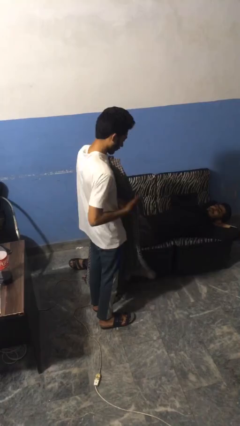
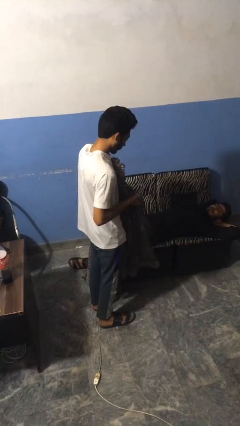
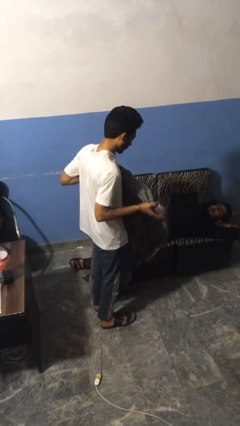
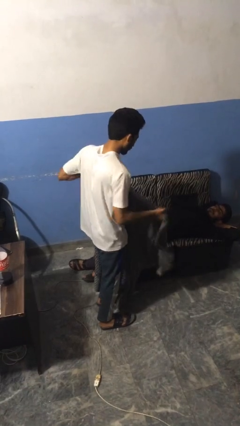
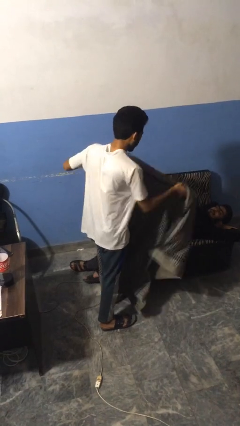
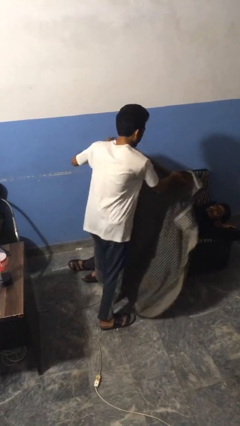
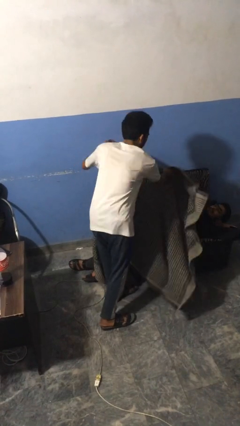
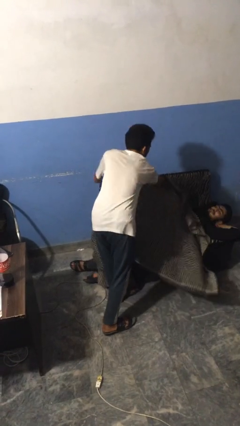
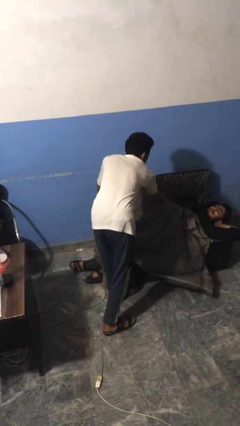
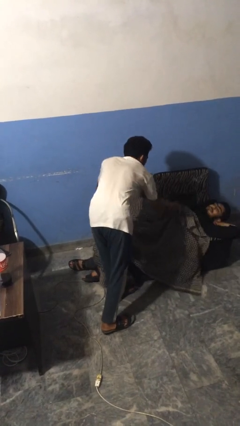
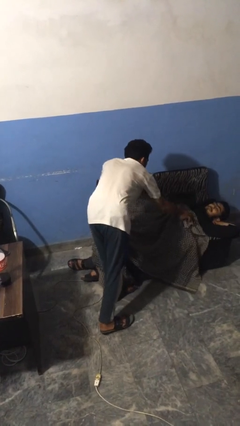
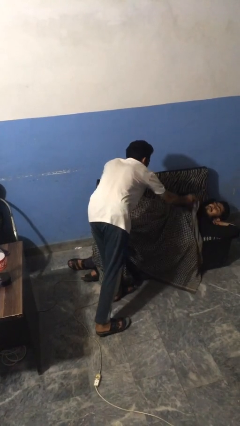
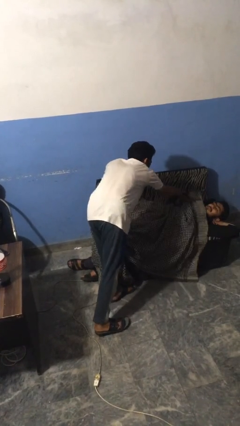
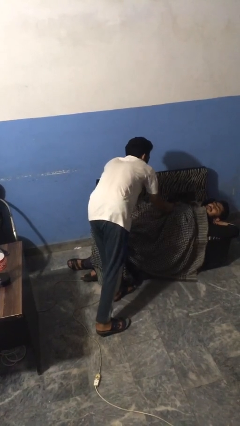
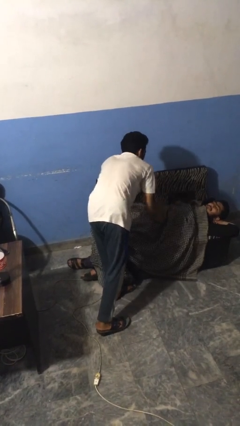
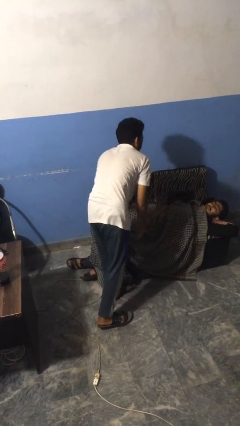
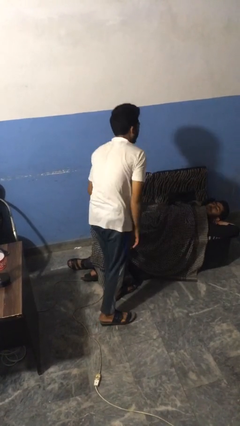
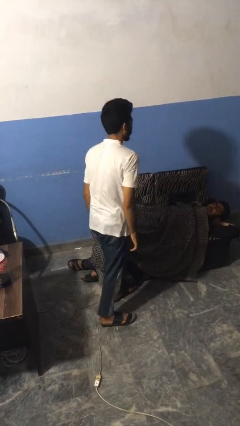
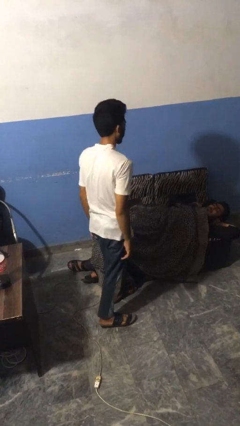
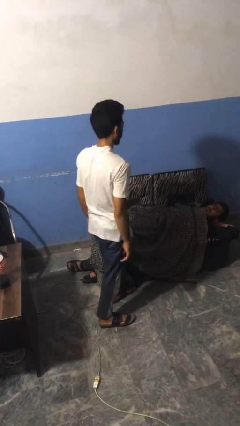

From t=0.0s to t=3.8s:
person covers friend with blanket

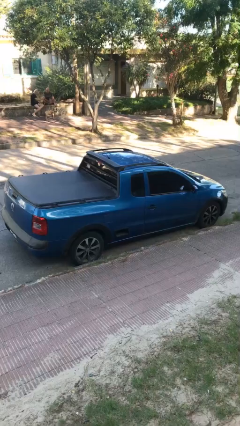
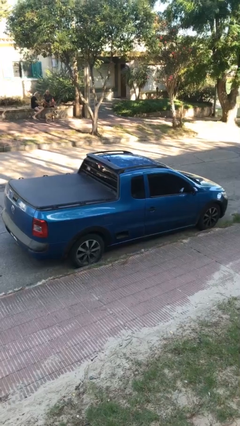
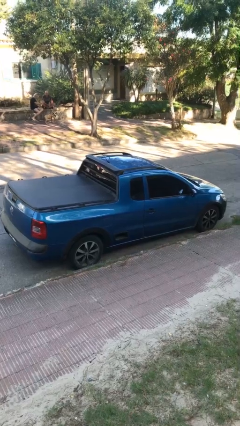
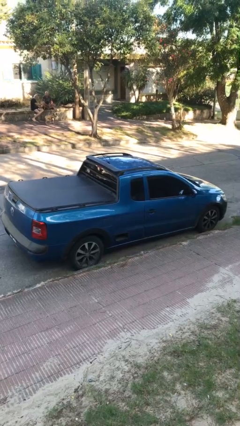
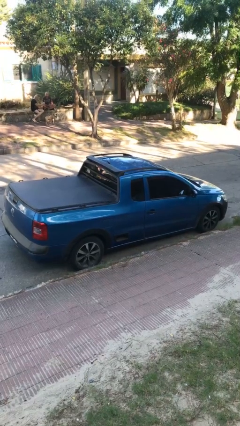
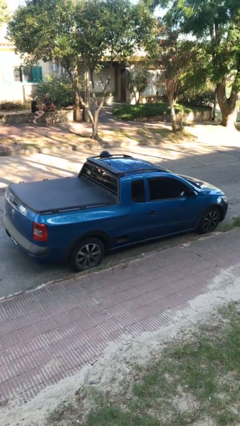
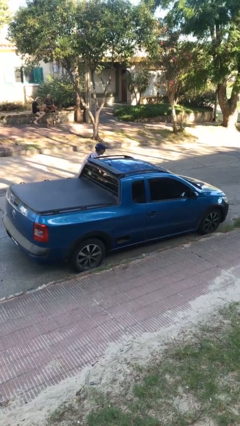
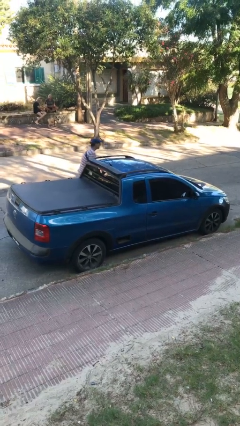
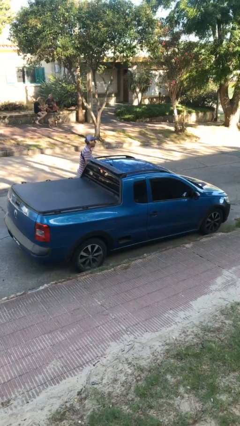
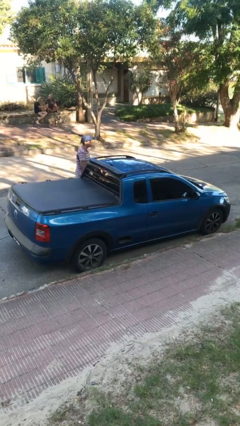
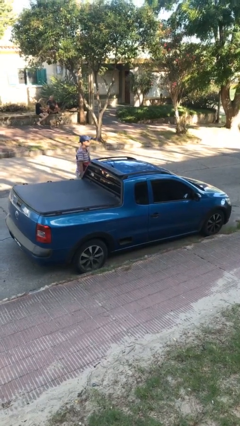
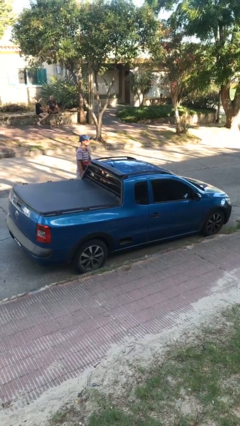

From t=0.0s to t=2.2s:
car drops off person

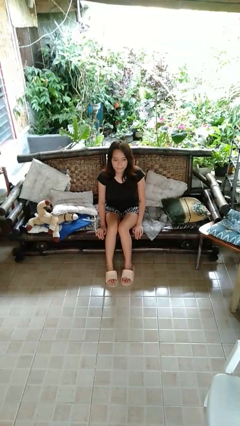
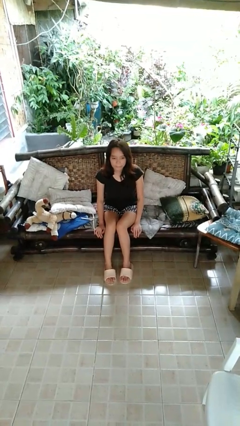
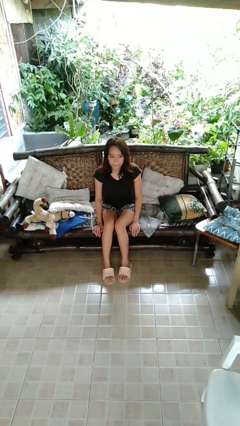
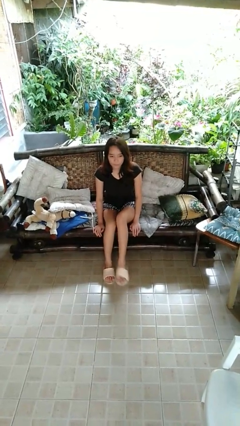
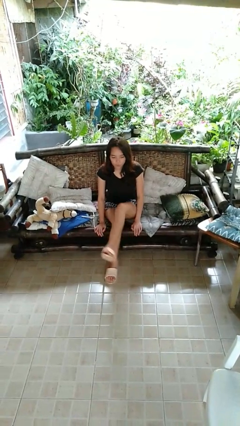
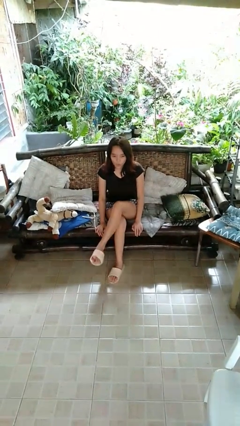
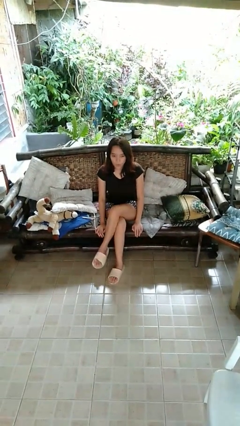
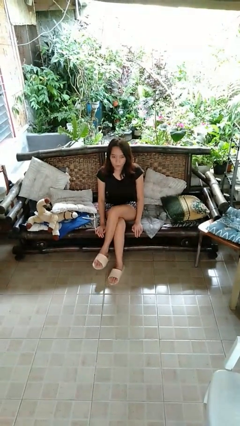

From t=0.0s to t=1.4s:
person crosses legs

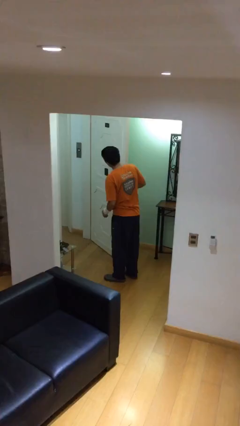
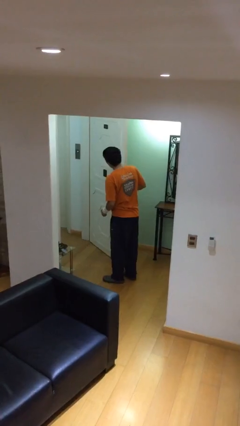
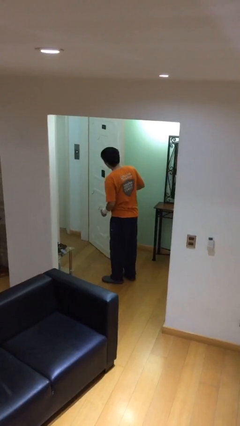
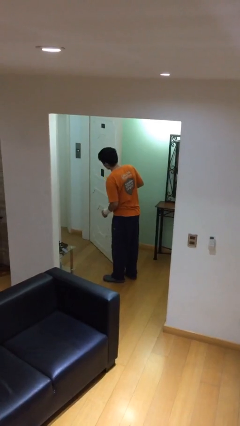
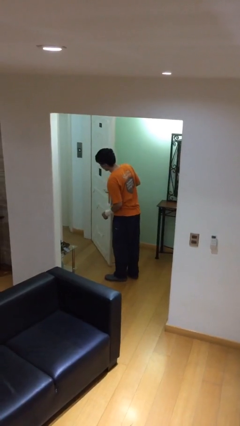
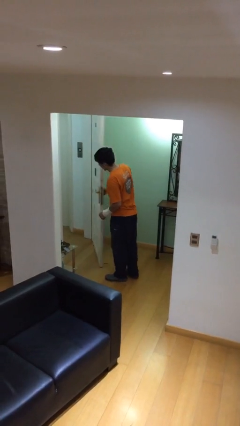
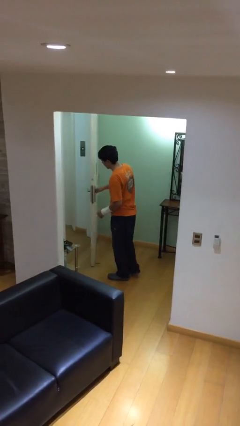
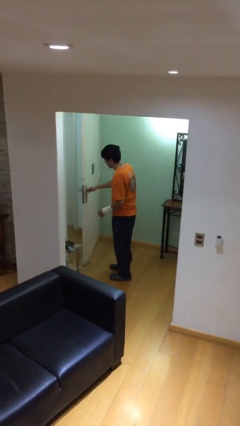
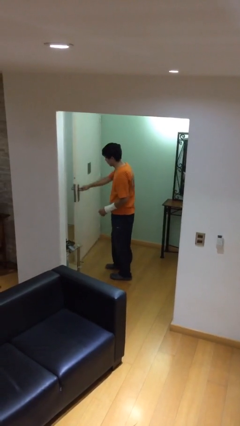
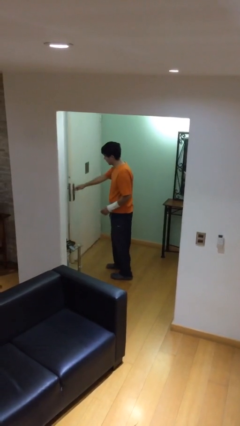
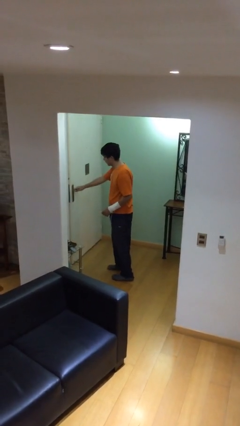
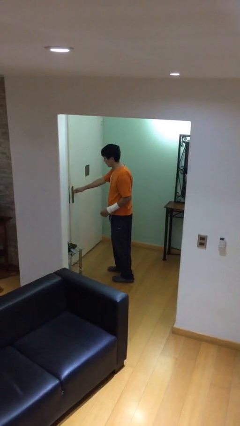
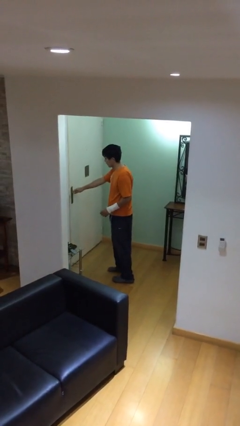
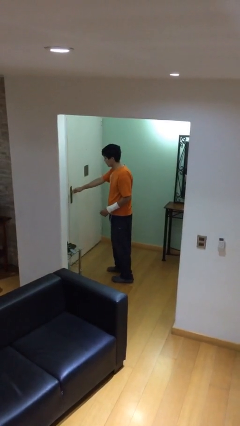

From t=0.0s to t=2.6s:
person closes facility door

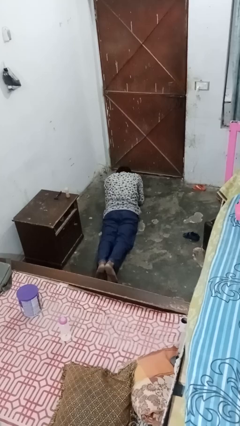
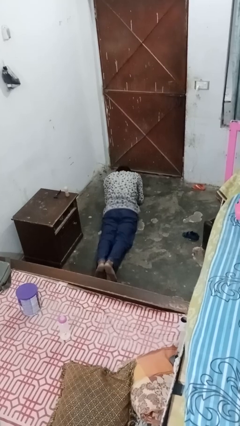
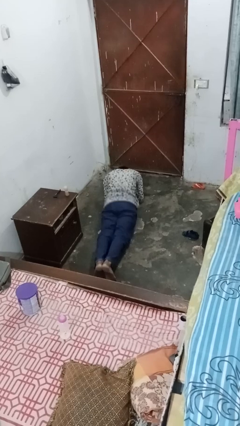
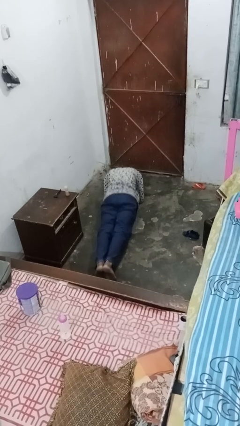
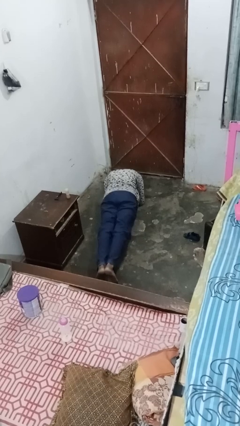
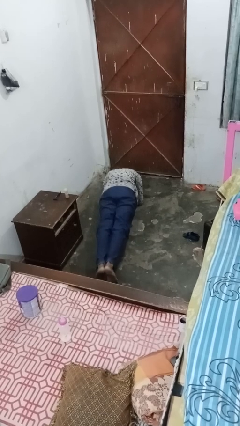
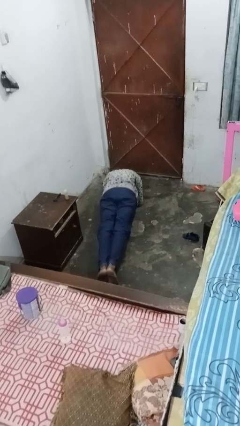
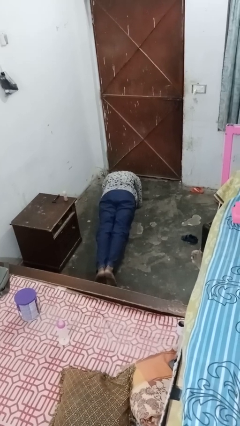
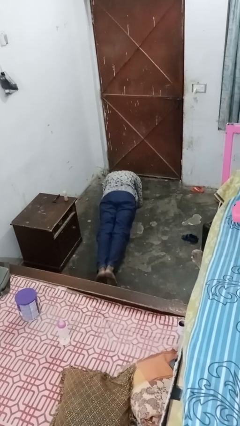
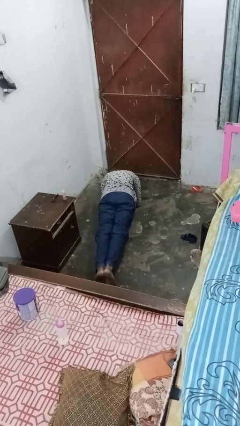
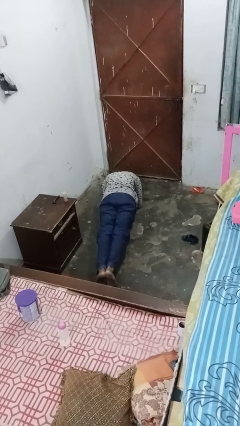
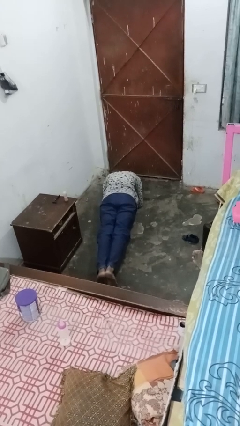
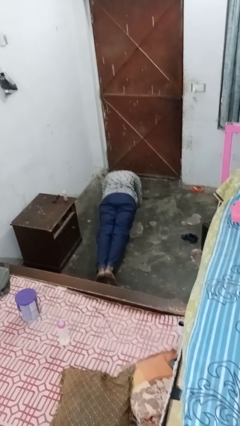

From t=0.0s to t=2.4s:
person exercises with plank

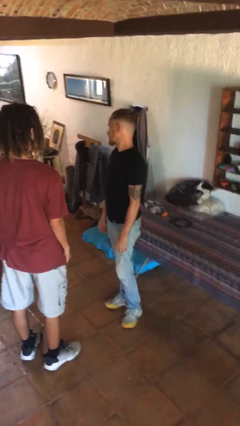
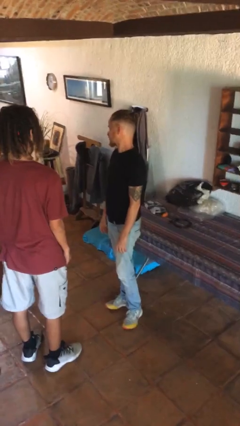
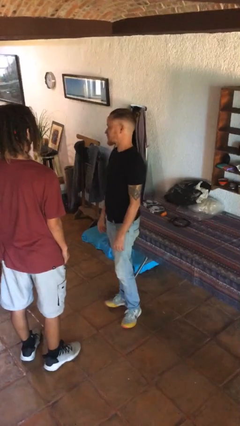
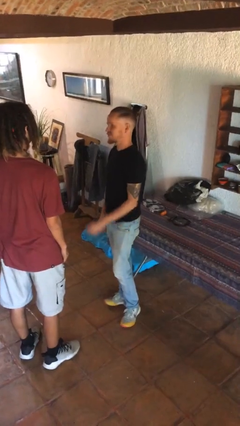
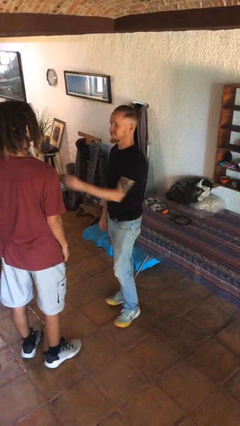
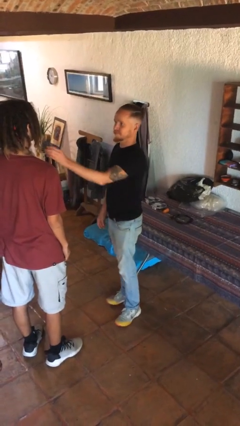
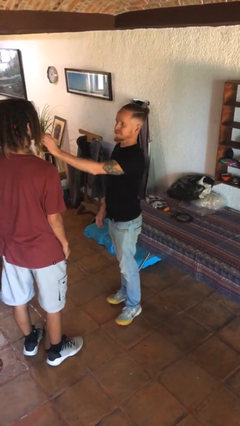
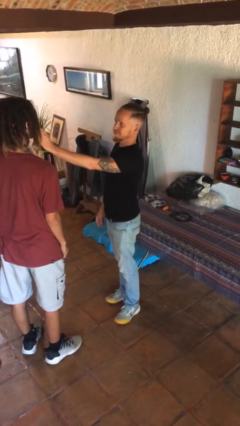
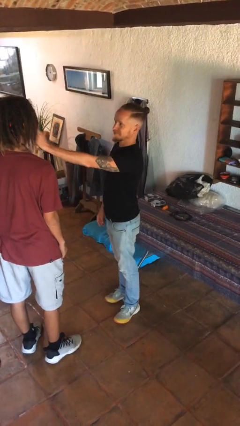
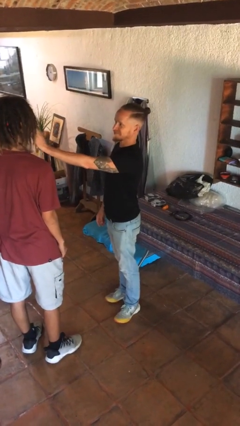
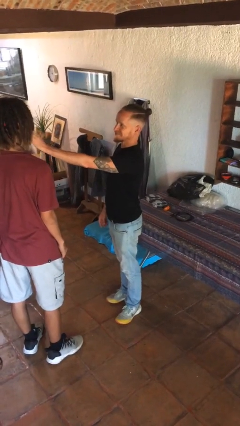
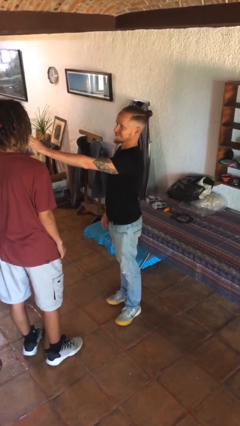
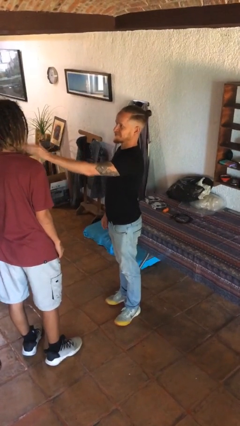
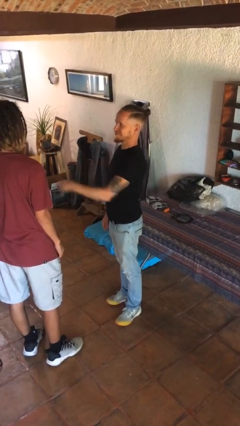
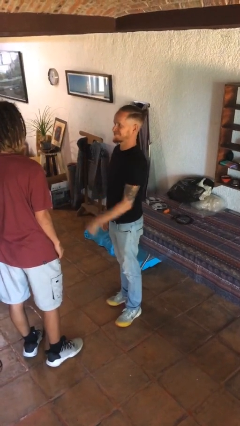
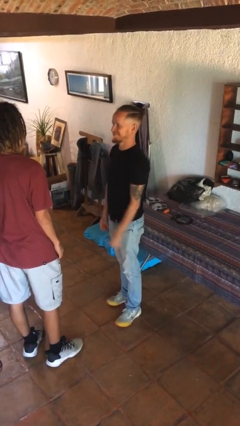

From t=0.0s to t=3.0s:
person touches face of person

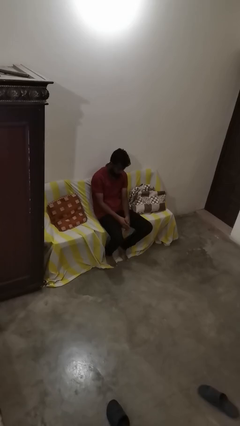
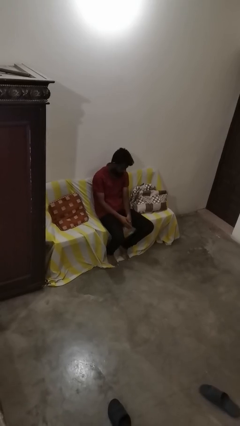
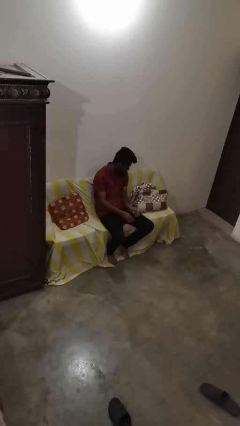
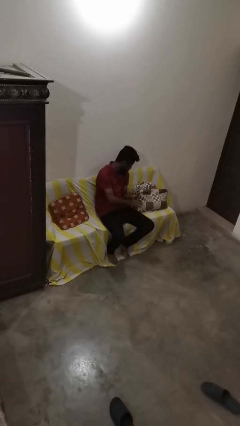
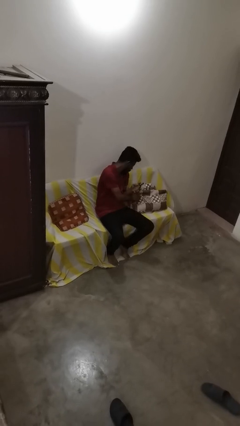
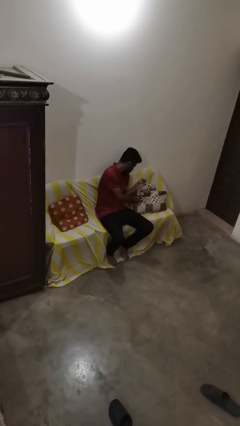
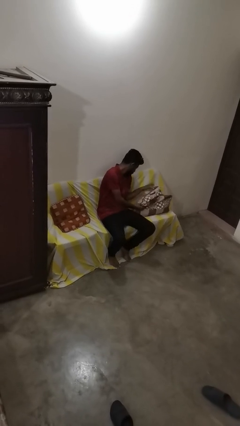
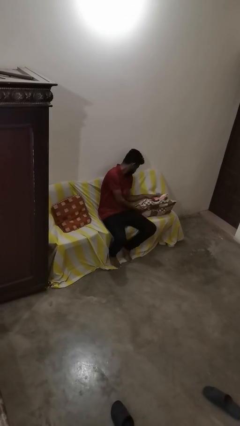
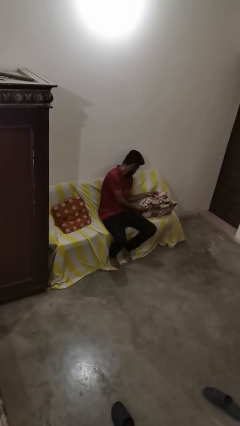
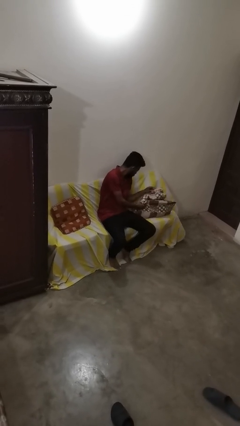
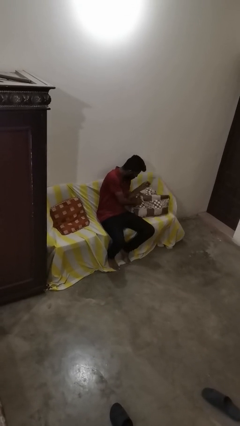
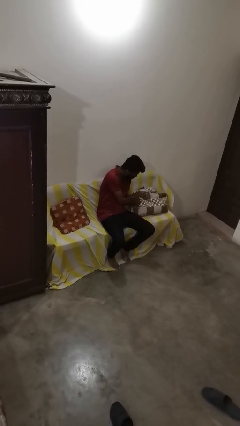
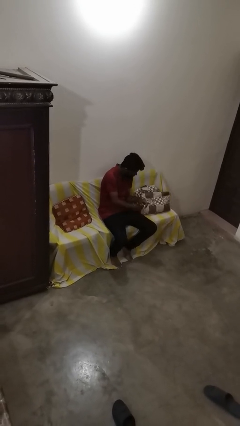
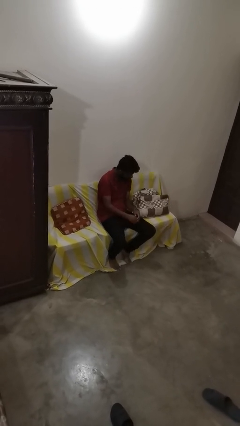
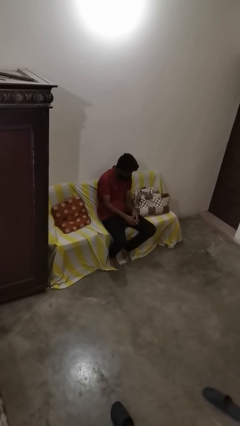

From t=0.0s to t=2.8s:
person searches in couch
